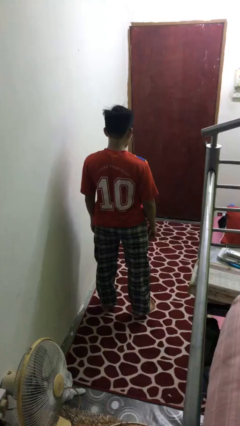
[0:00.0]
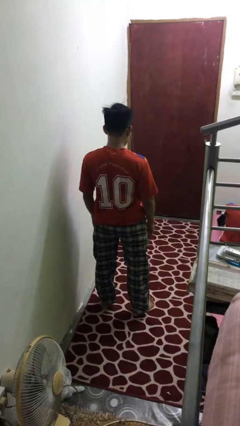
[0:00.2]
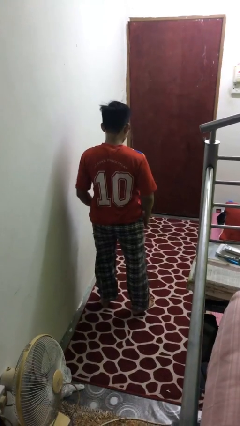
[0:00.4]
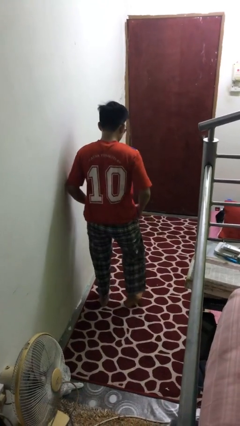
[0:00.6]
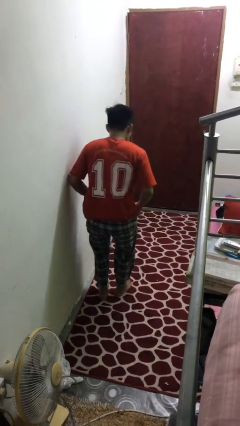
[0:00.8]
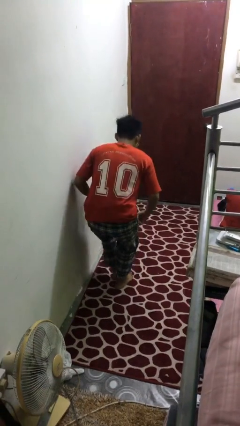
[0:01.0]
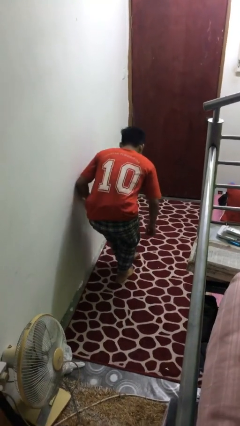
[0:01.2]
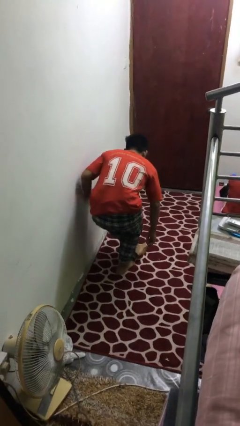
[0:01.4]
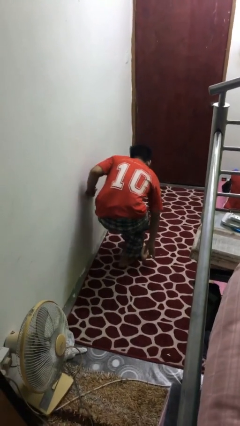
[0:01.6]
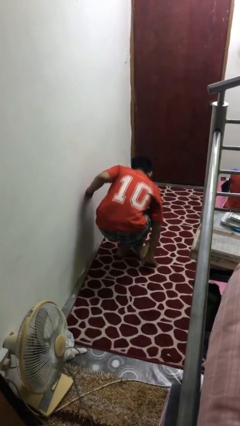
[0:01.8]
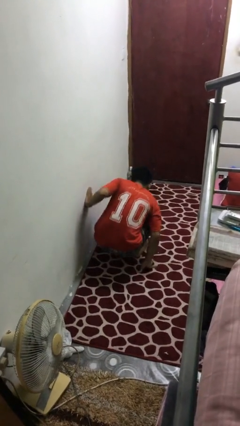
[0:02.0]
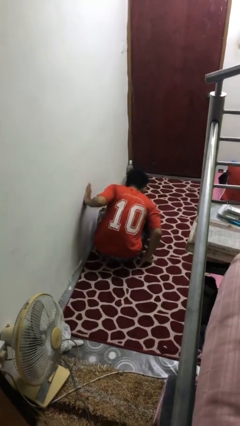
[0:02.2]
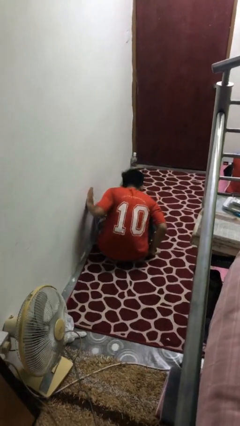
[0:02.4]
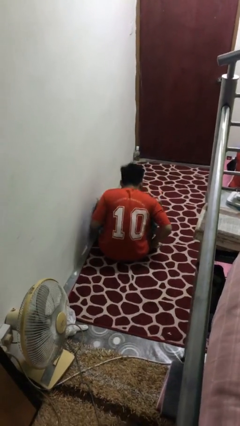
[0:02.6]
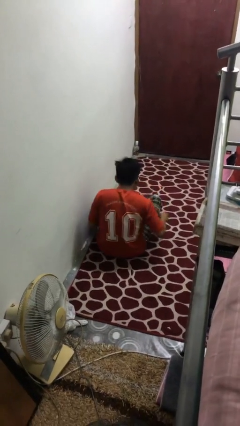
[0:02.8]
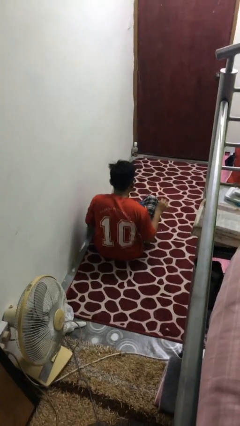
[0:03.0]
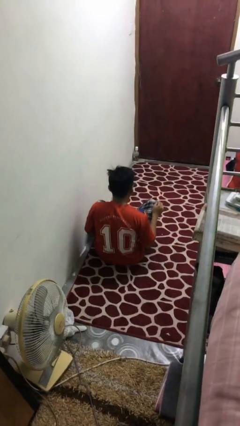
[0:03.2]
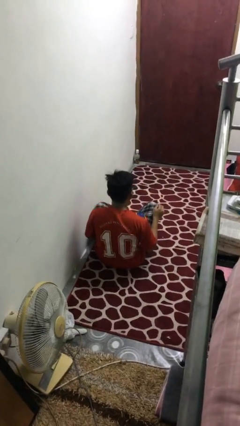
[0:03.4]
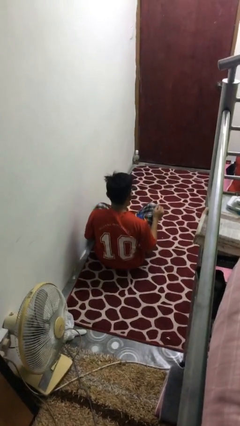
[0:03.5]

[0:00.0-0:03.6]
person sits crisscross

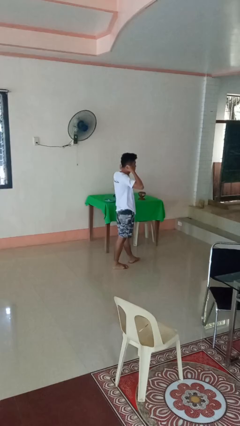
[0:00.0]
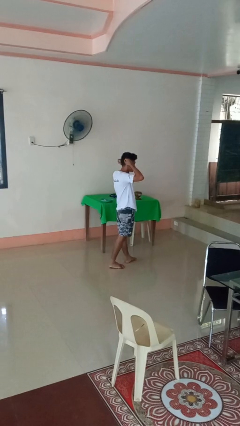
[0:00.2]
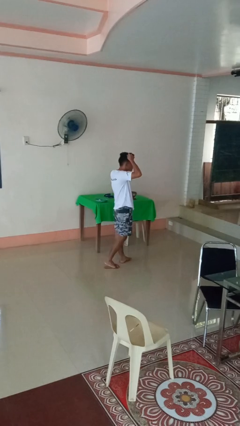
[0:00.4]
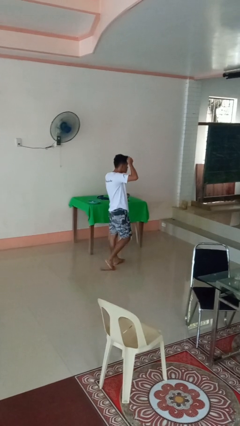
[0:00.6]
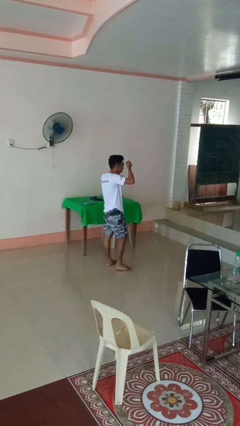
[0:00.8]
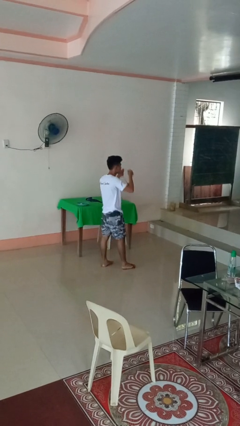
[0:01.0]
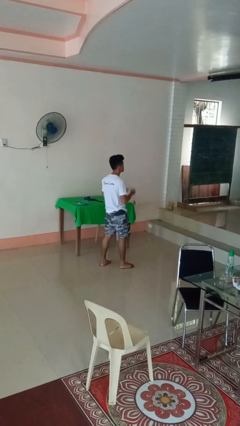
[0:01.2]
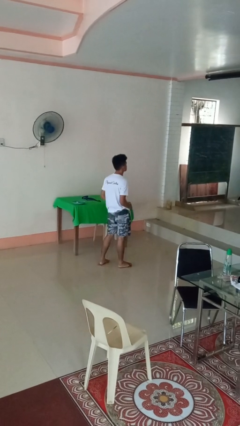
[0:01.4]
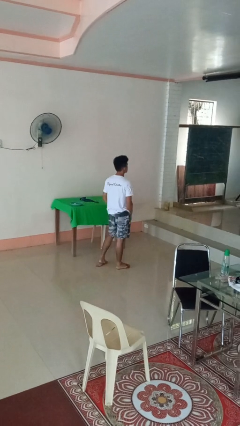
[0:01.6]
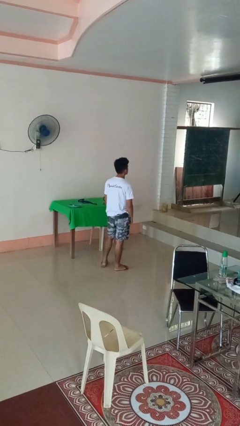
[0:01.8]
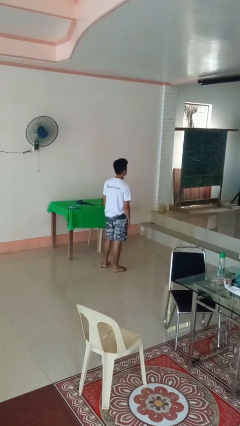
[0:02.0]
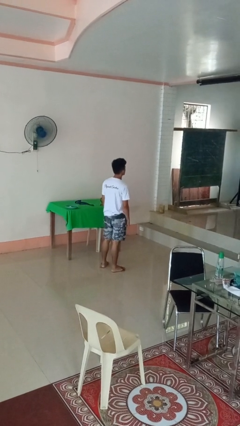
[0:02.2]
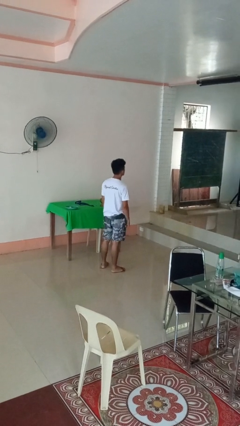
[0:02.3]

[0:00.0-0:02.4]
person takes off necklace

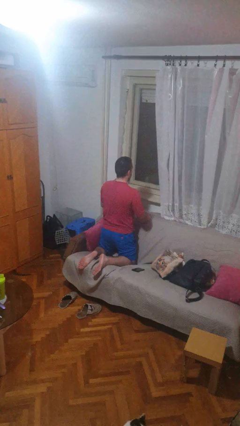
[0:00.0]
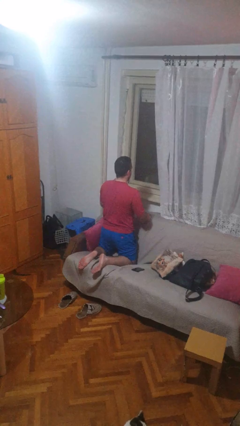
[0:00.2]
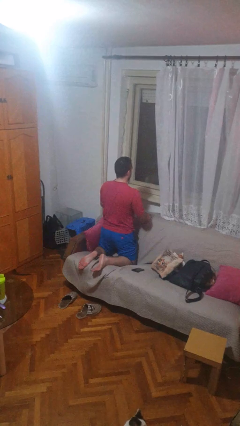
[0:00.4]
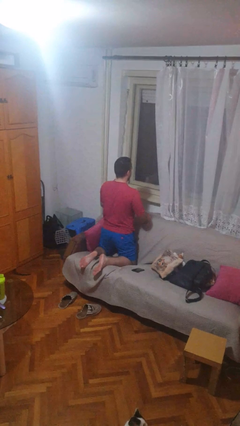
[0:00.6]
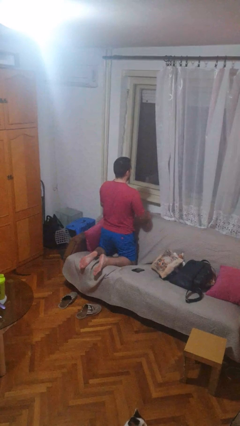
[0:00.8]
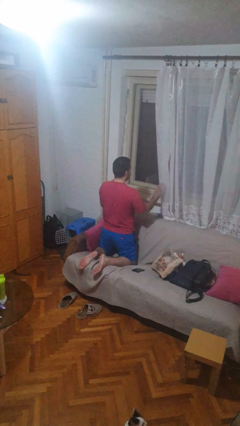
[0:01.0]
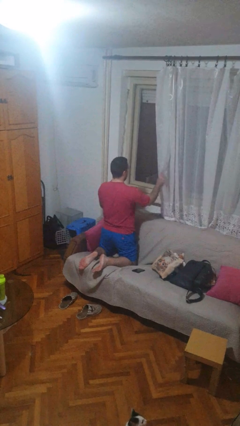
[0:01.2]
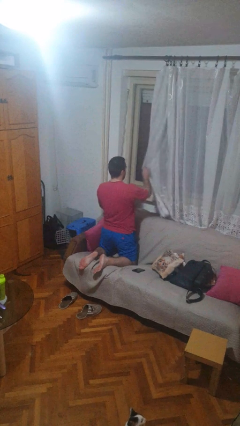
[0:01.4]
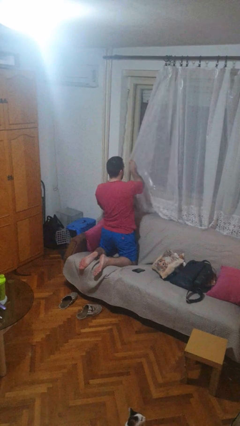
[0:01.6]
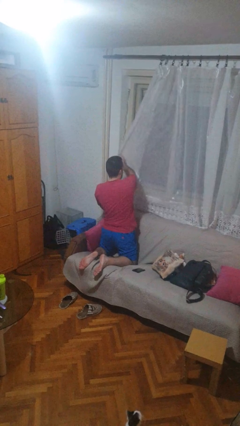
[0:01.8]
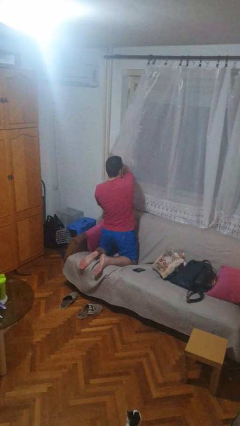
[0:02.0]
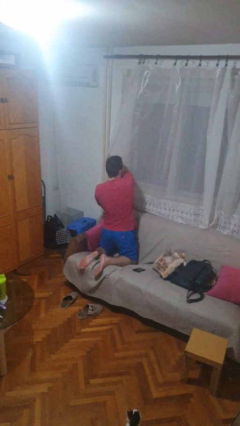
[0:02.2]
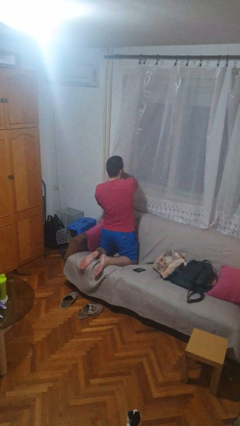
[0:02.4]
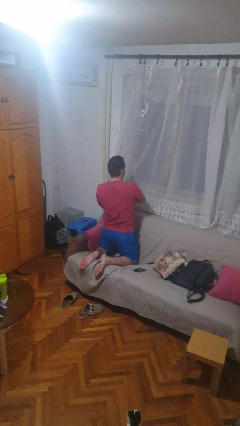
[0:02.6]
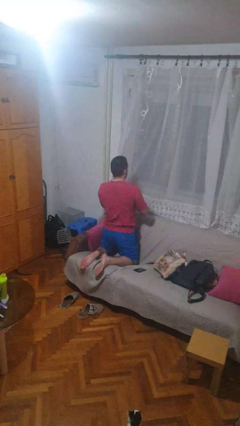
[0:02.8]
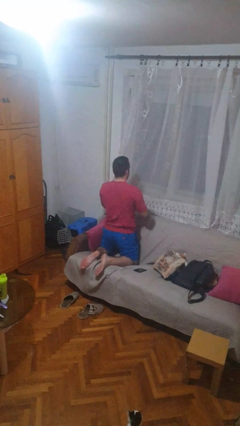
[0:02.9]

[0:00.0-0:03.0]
person closes curtains

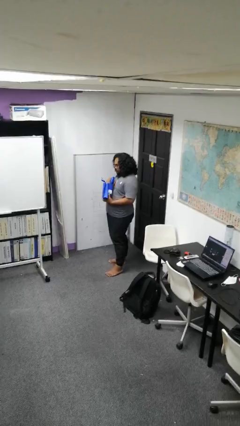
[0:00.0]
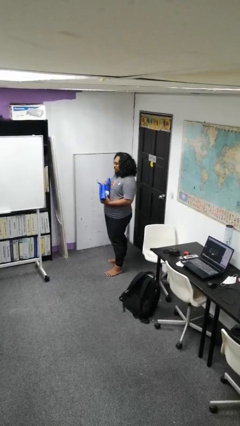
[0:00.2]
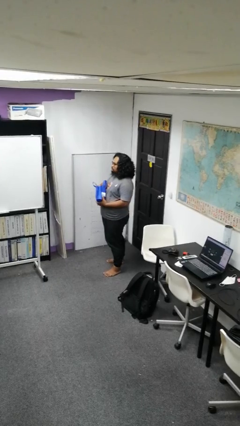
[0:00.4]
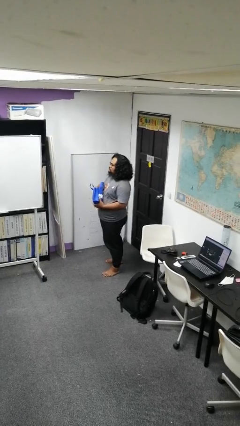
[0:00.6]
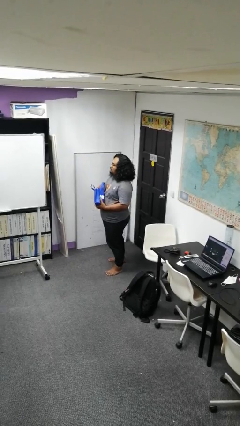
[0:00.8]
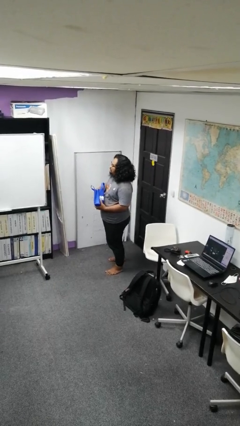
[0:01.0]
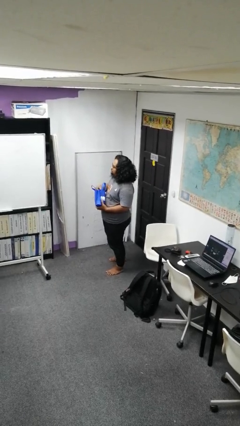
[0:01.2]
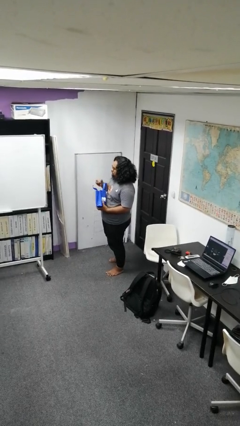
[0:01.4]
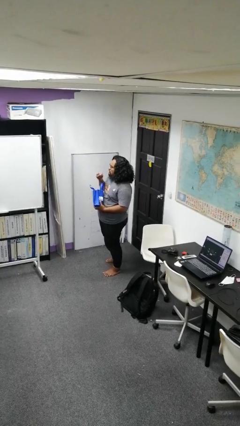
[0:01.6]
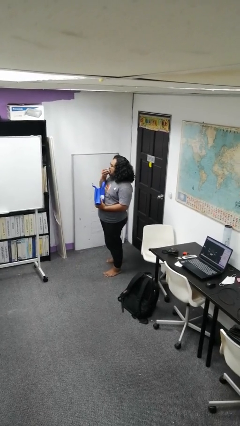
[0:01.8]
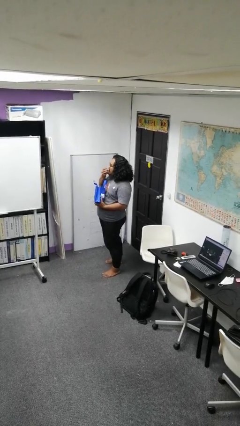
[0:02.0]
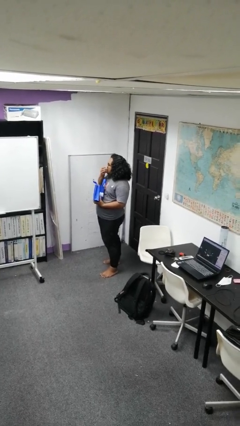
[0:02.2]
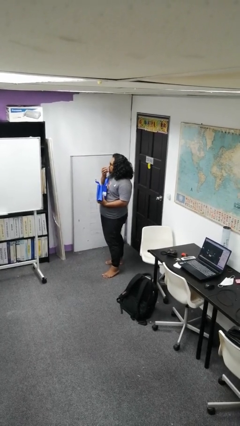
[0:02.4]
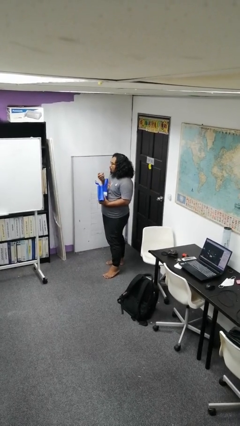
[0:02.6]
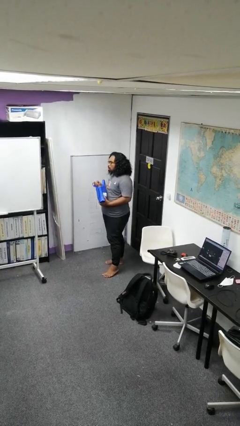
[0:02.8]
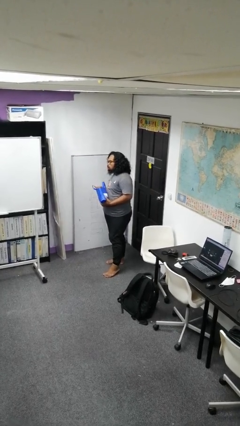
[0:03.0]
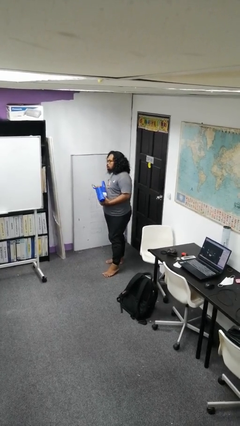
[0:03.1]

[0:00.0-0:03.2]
person eats snack from bag

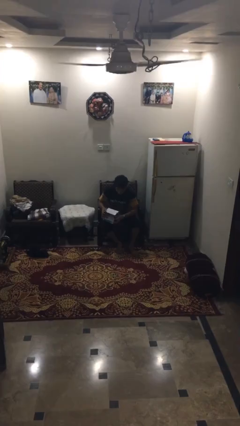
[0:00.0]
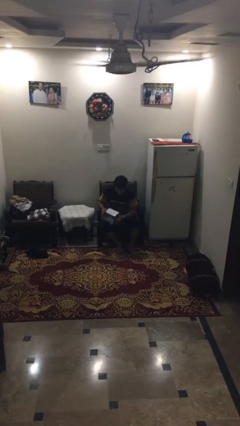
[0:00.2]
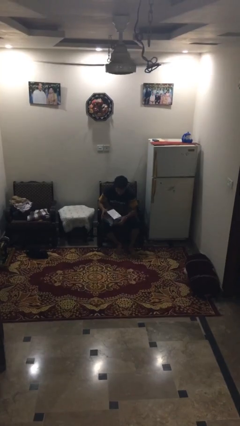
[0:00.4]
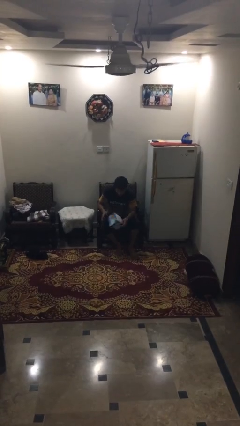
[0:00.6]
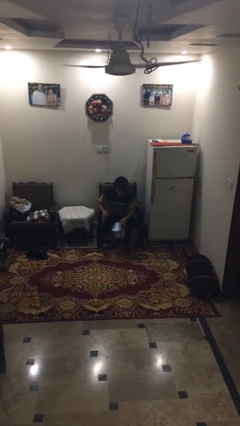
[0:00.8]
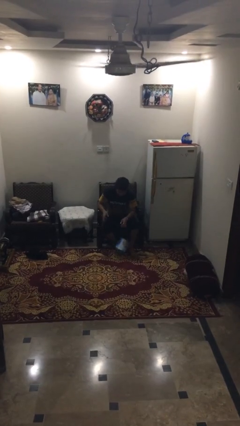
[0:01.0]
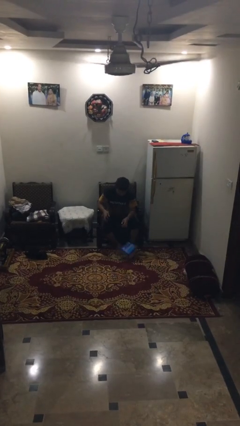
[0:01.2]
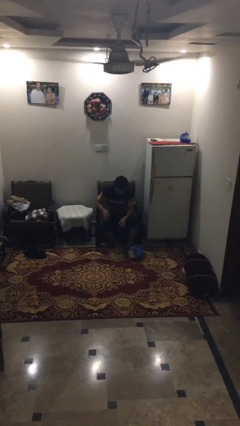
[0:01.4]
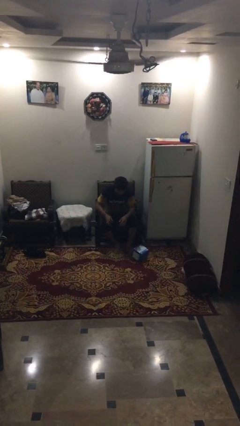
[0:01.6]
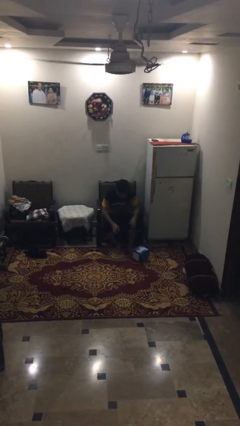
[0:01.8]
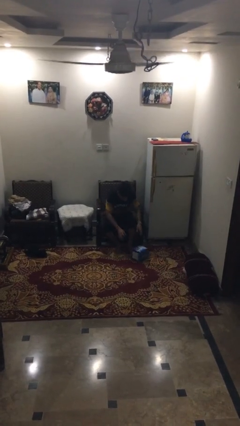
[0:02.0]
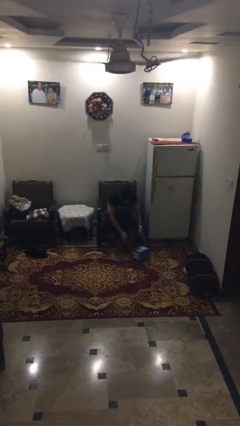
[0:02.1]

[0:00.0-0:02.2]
person drops object

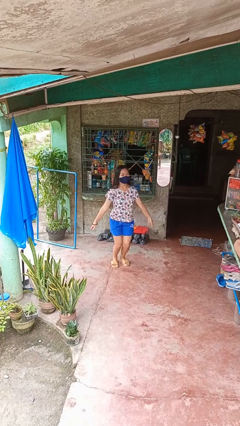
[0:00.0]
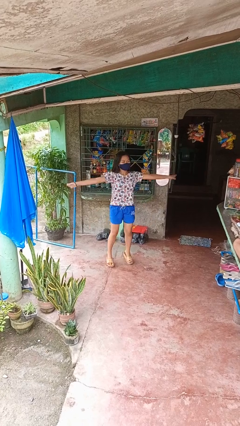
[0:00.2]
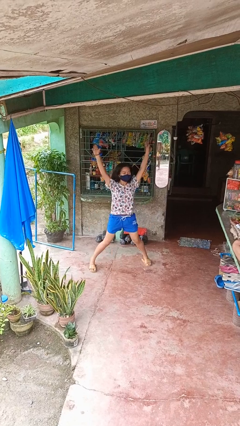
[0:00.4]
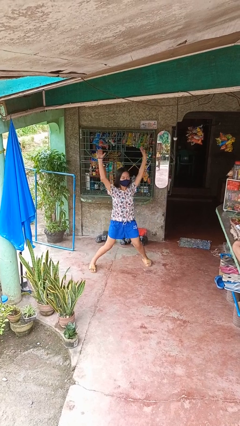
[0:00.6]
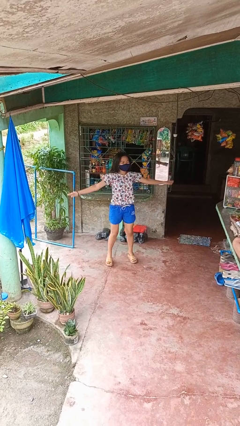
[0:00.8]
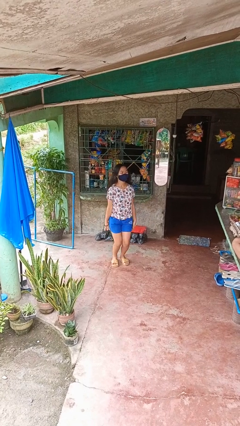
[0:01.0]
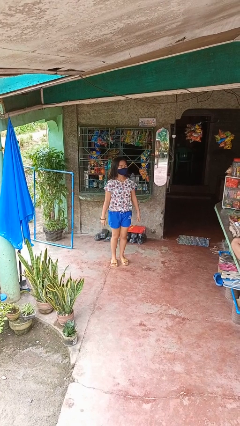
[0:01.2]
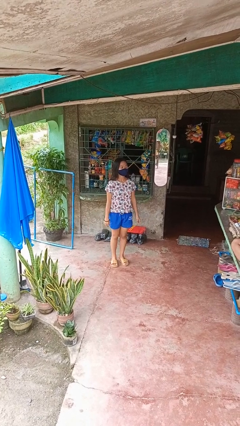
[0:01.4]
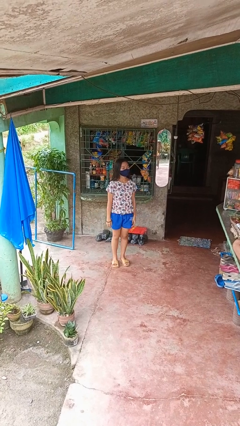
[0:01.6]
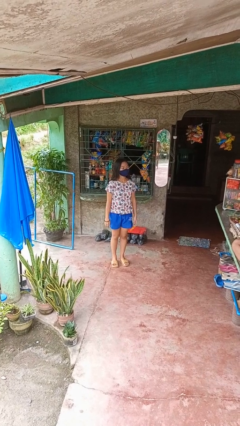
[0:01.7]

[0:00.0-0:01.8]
person exercises with jumping jacks

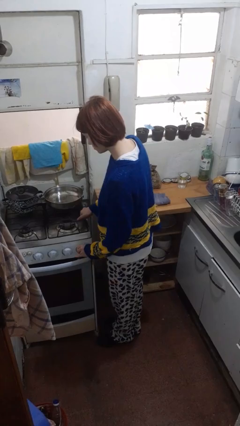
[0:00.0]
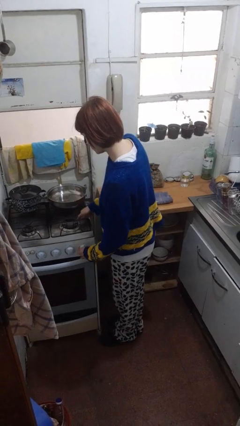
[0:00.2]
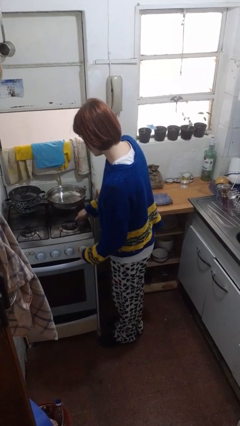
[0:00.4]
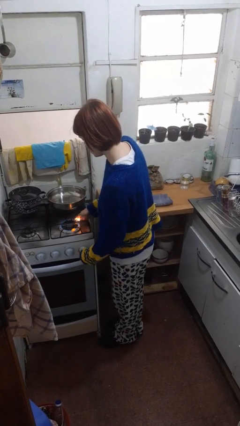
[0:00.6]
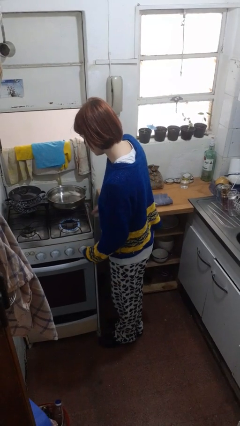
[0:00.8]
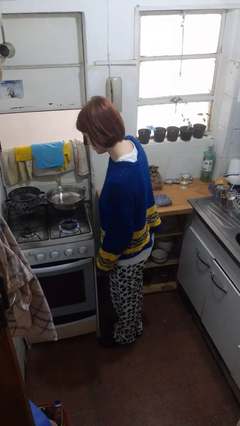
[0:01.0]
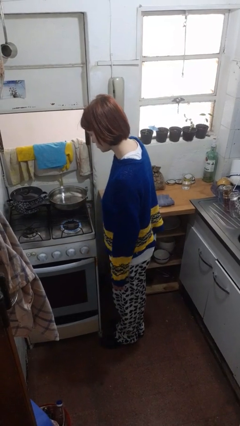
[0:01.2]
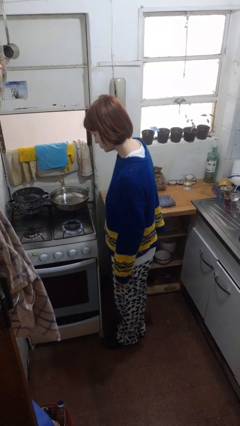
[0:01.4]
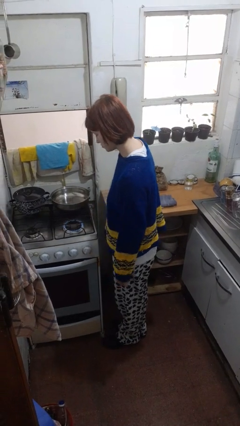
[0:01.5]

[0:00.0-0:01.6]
person turns on stovetop
